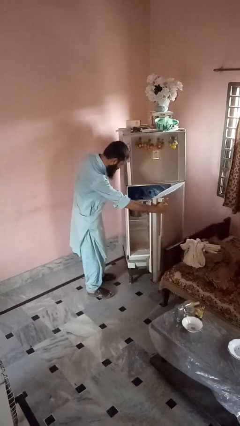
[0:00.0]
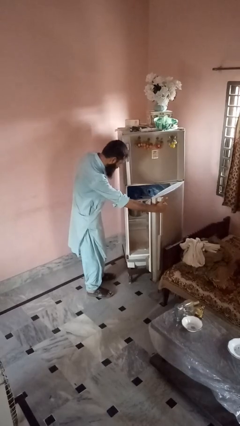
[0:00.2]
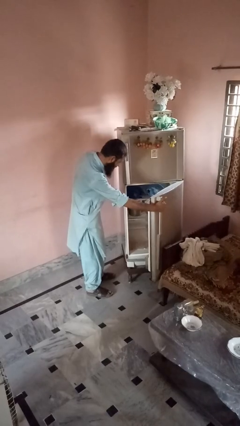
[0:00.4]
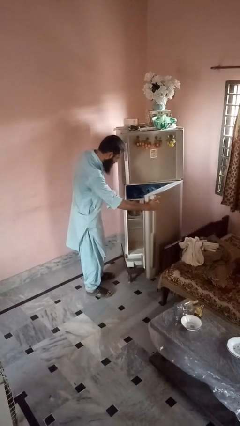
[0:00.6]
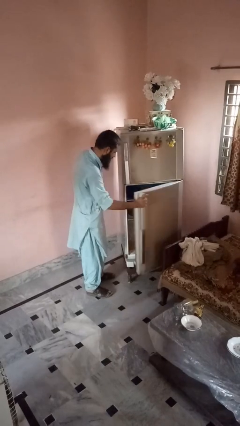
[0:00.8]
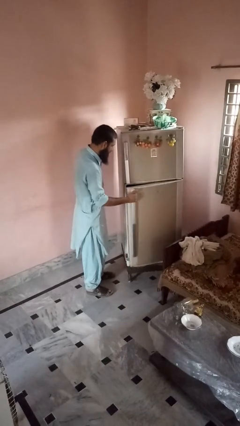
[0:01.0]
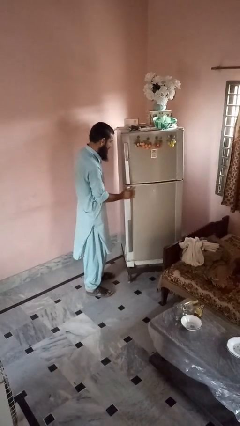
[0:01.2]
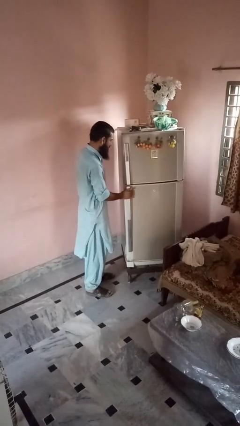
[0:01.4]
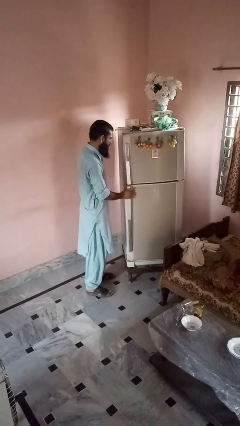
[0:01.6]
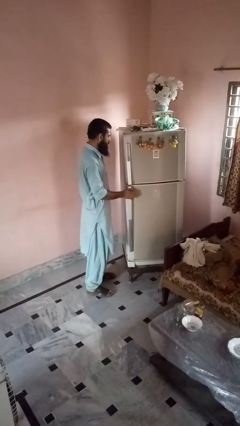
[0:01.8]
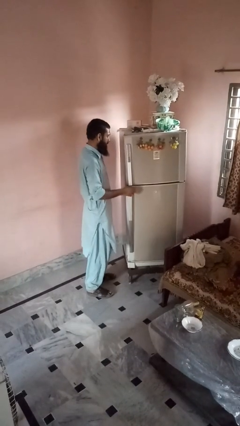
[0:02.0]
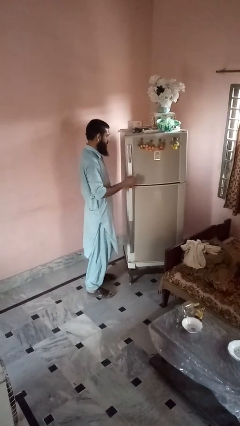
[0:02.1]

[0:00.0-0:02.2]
person closes refrigerator

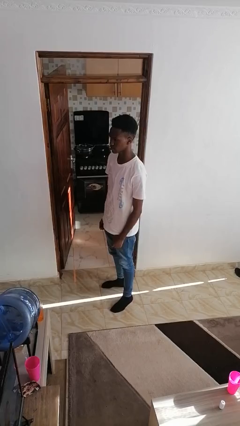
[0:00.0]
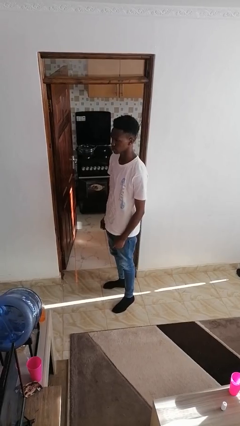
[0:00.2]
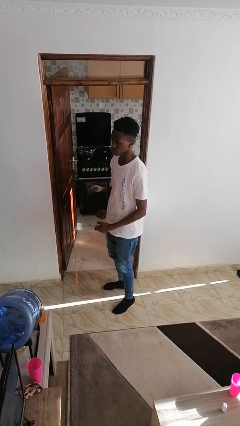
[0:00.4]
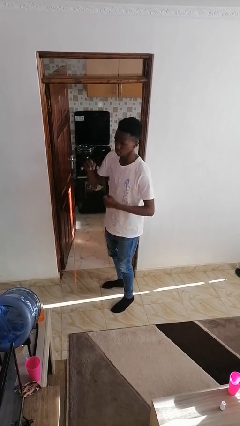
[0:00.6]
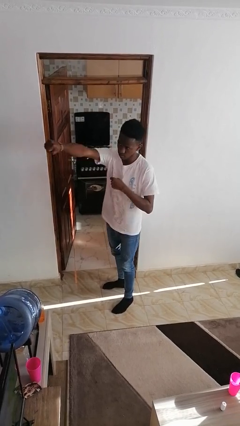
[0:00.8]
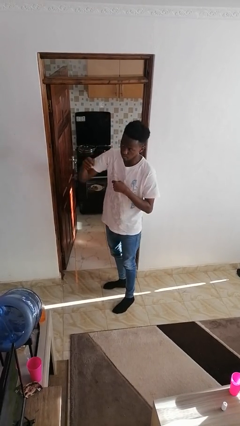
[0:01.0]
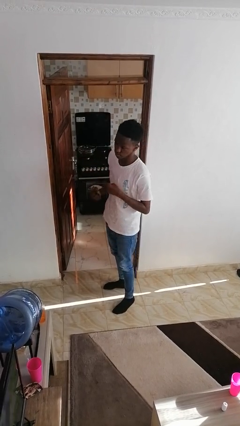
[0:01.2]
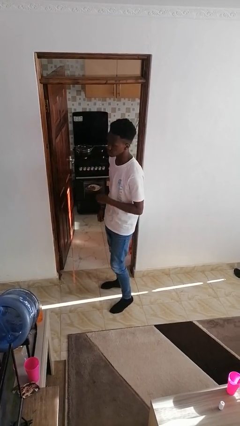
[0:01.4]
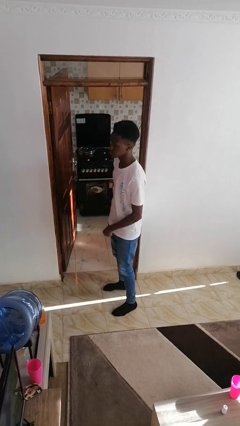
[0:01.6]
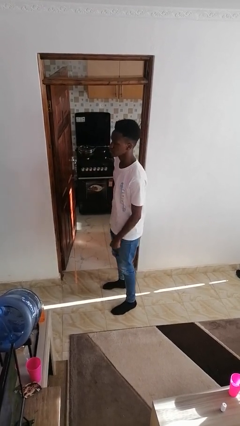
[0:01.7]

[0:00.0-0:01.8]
person punches

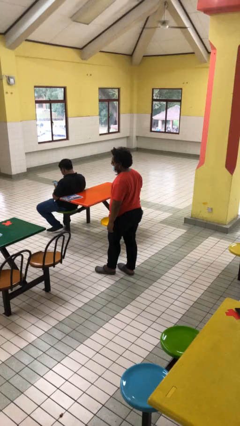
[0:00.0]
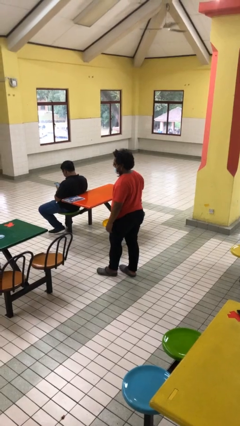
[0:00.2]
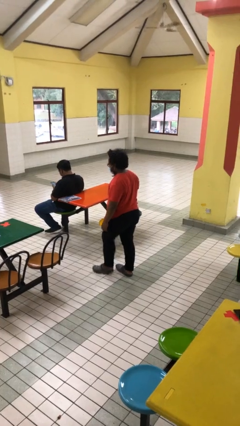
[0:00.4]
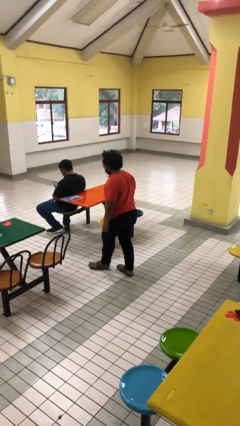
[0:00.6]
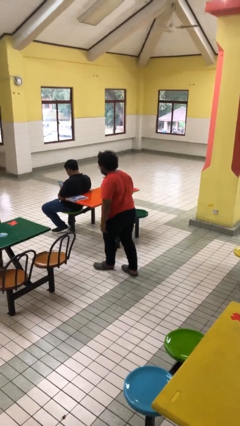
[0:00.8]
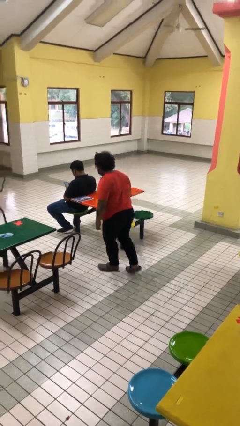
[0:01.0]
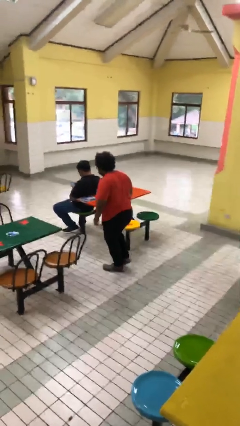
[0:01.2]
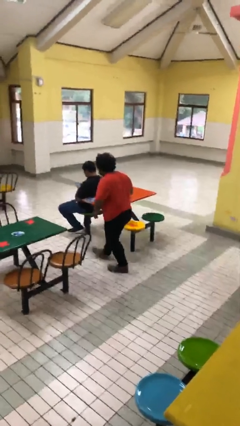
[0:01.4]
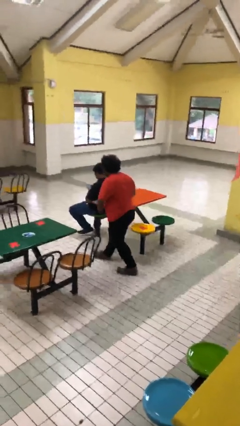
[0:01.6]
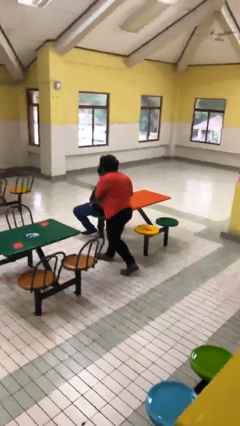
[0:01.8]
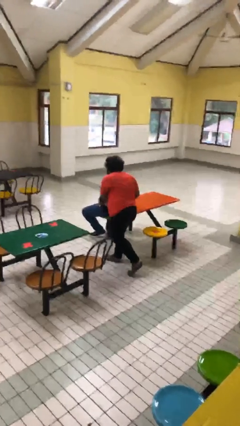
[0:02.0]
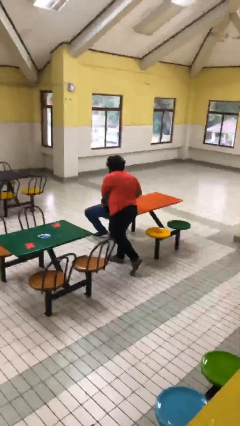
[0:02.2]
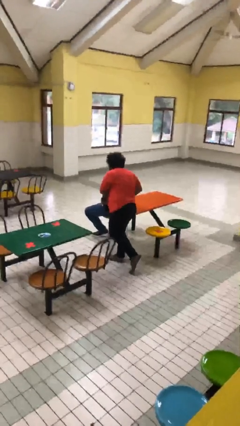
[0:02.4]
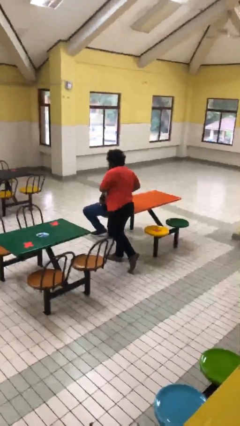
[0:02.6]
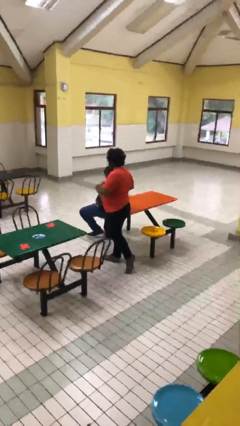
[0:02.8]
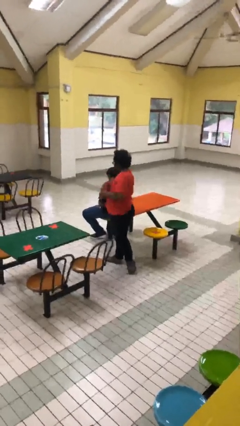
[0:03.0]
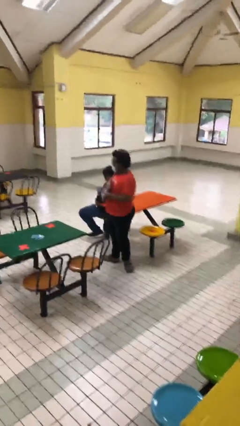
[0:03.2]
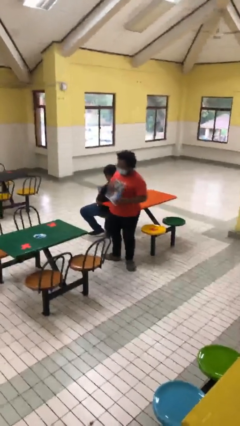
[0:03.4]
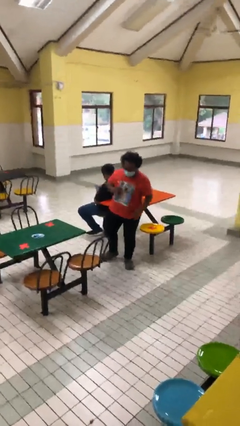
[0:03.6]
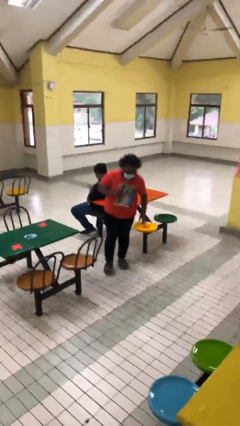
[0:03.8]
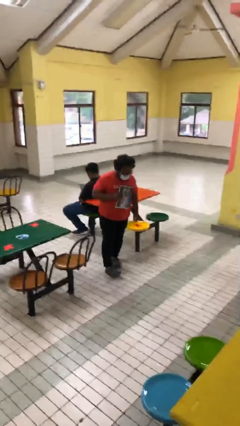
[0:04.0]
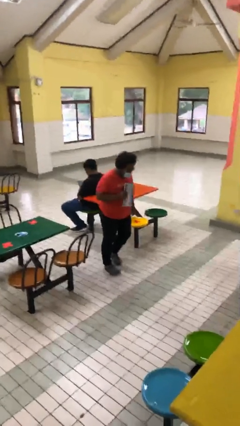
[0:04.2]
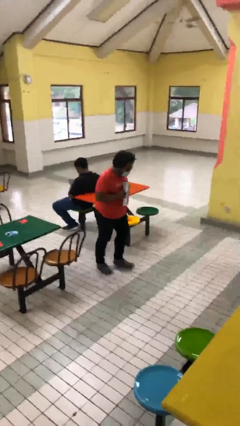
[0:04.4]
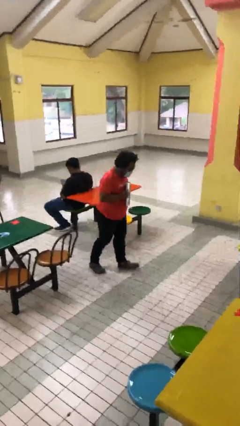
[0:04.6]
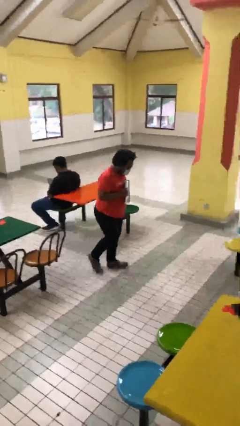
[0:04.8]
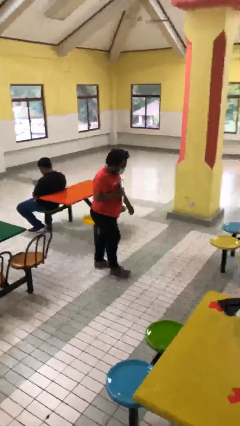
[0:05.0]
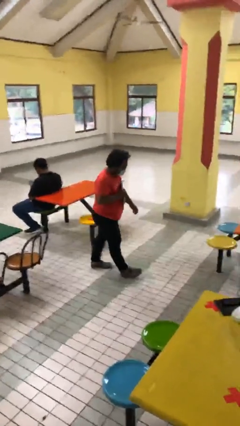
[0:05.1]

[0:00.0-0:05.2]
person steals object from person

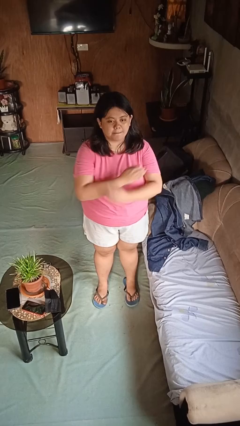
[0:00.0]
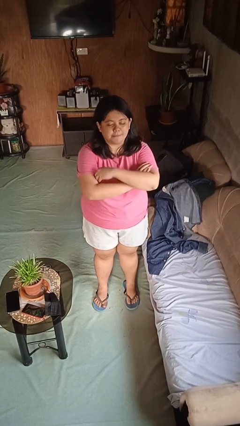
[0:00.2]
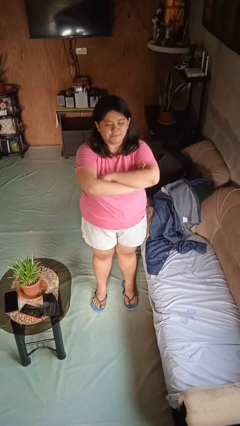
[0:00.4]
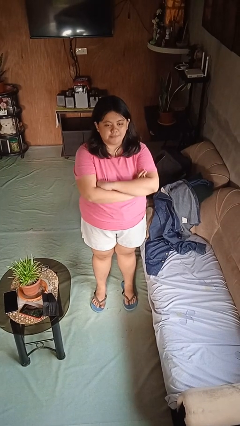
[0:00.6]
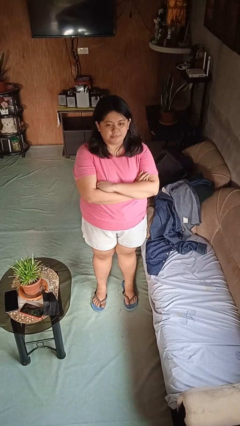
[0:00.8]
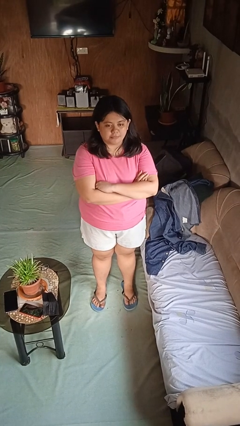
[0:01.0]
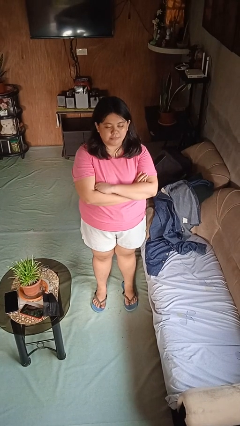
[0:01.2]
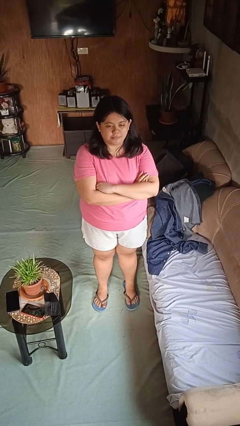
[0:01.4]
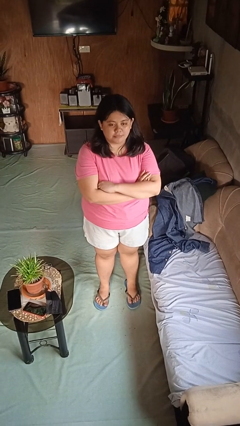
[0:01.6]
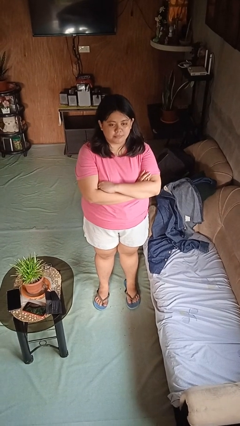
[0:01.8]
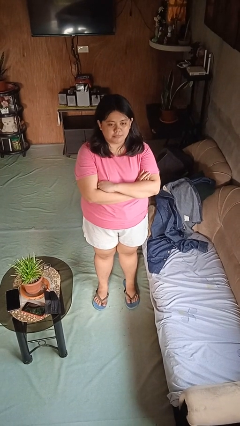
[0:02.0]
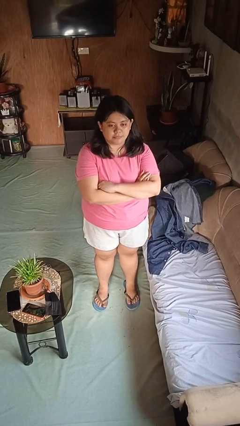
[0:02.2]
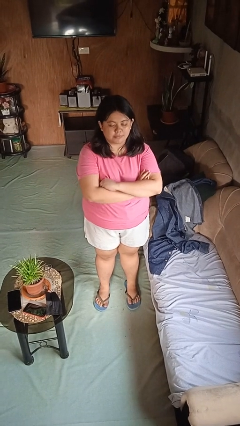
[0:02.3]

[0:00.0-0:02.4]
person crosses arms

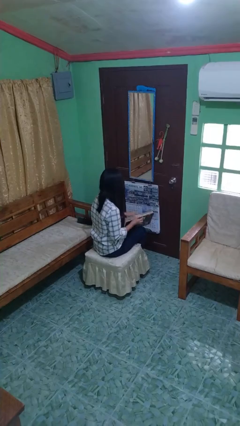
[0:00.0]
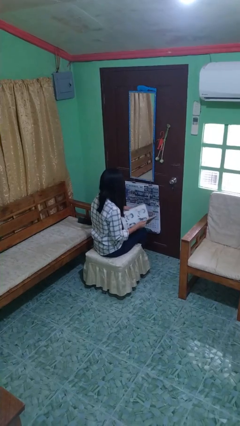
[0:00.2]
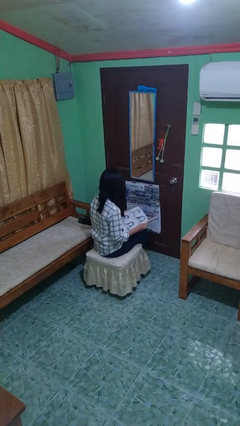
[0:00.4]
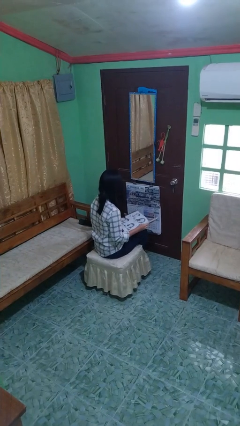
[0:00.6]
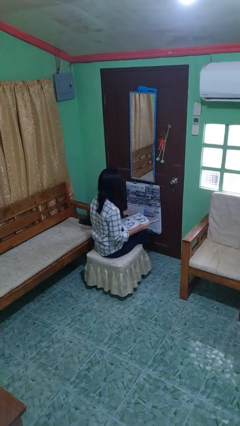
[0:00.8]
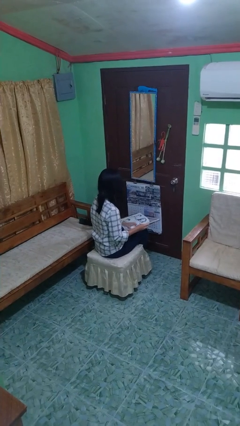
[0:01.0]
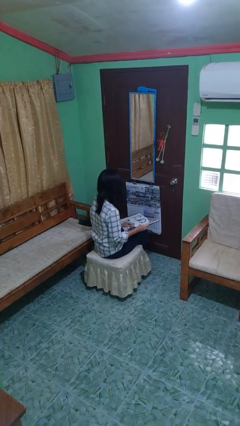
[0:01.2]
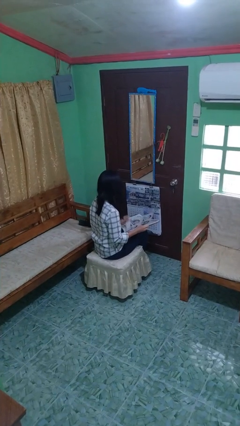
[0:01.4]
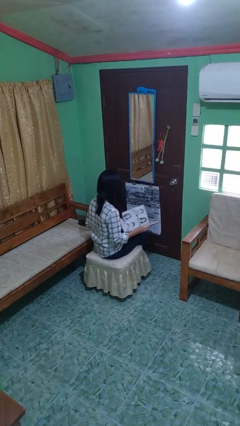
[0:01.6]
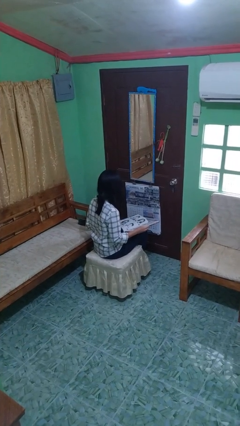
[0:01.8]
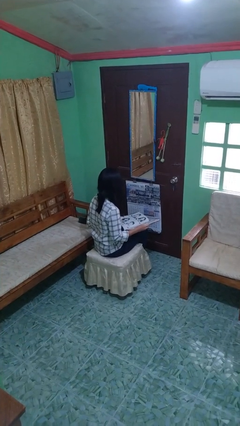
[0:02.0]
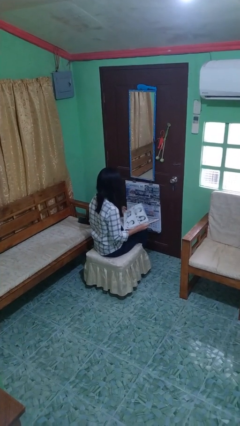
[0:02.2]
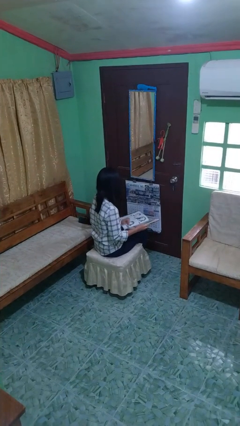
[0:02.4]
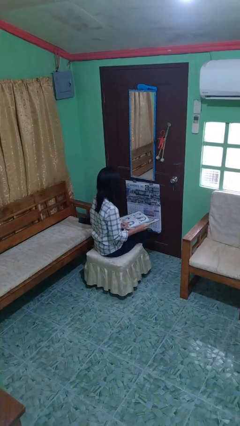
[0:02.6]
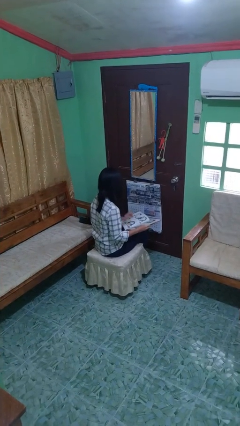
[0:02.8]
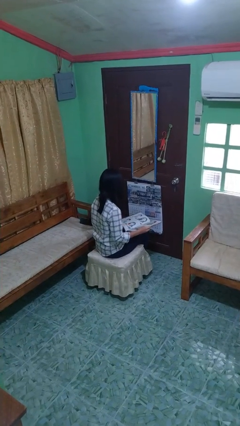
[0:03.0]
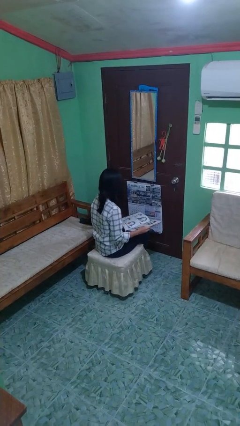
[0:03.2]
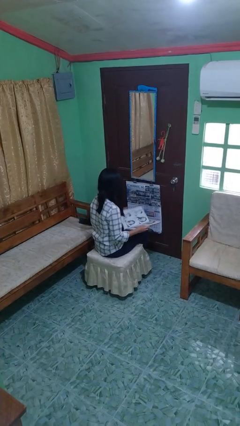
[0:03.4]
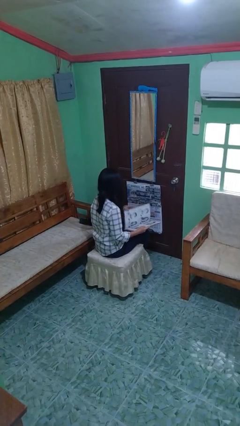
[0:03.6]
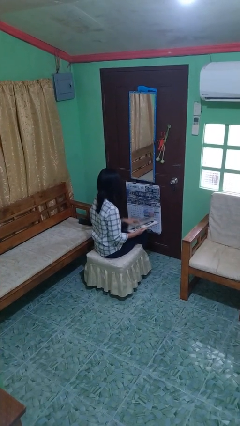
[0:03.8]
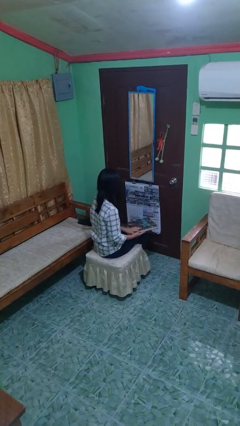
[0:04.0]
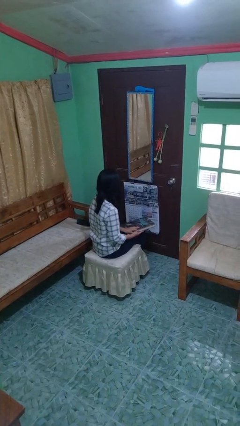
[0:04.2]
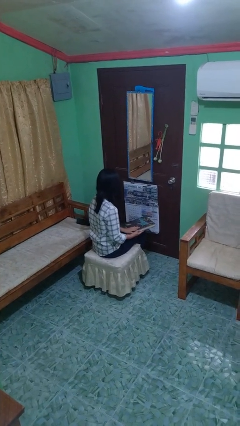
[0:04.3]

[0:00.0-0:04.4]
person reads book

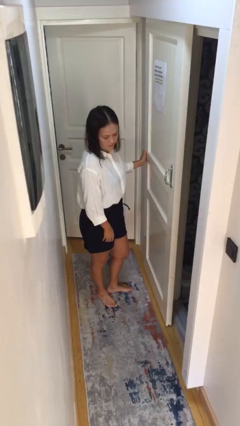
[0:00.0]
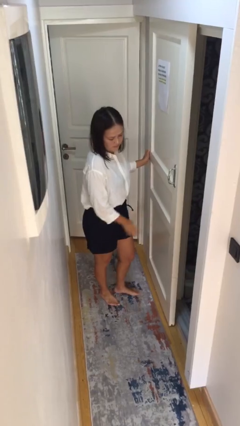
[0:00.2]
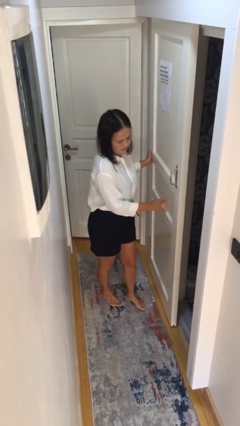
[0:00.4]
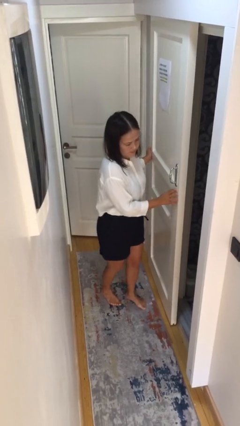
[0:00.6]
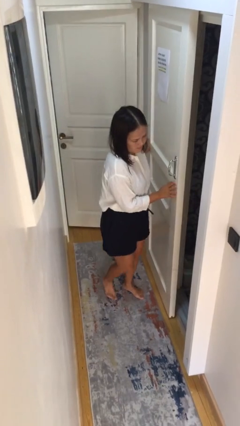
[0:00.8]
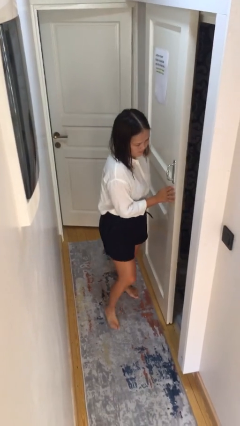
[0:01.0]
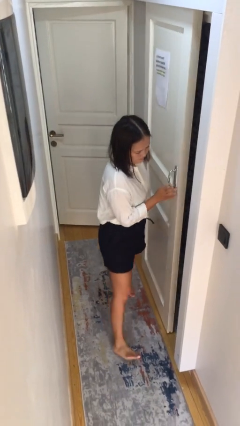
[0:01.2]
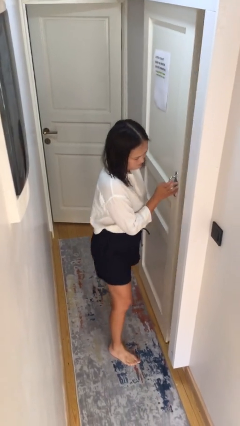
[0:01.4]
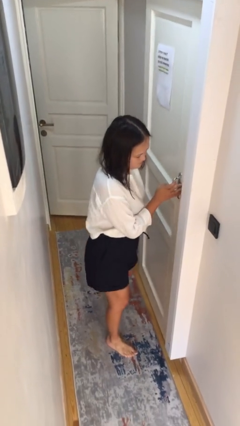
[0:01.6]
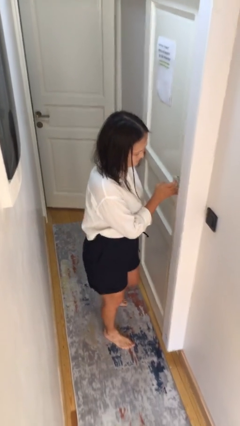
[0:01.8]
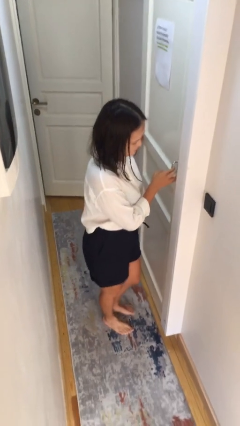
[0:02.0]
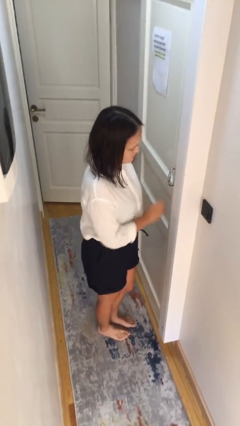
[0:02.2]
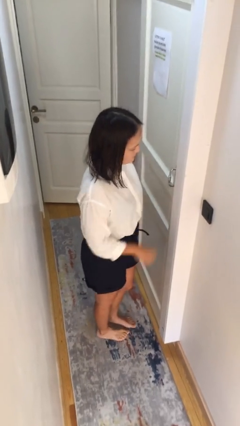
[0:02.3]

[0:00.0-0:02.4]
person closes sliding door
